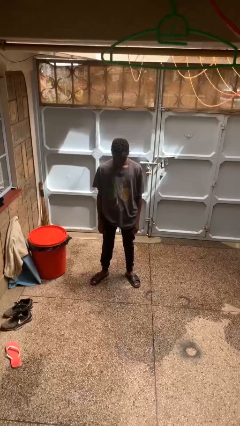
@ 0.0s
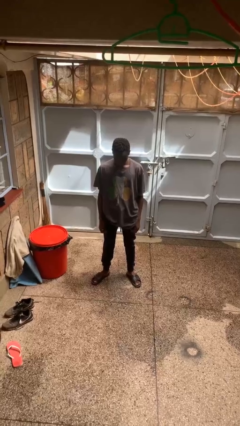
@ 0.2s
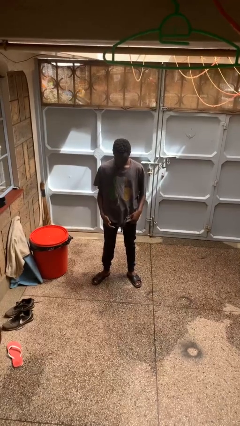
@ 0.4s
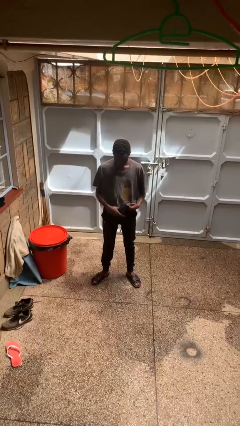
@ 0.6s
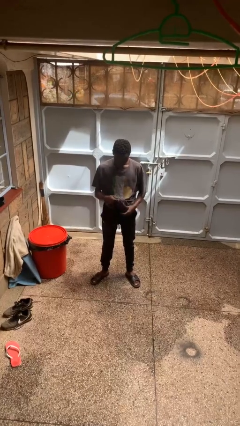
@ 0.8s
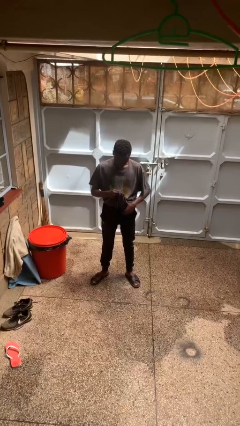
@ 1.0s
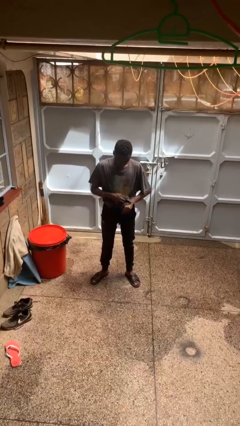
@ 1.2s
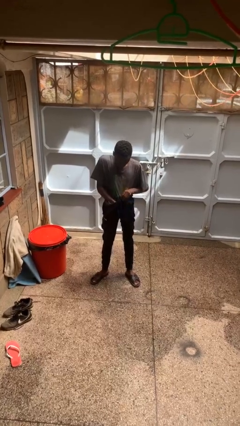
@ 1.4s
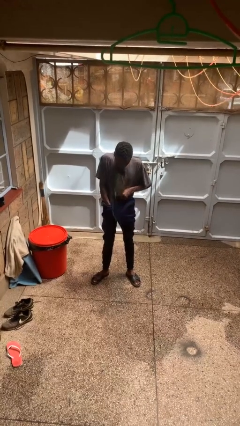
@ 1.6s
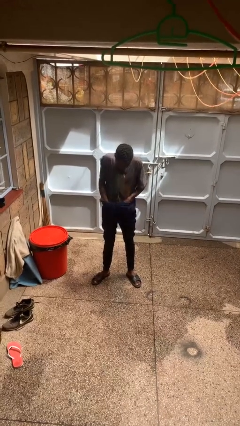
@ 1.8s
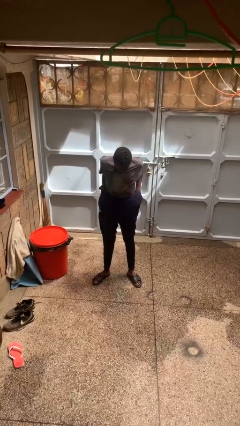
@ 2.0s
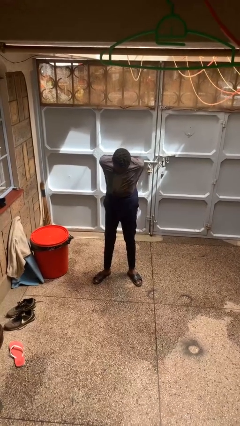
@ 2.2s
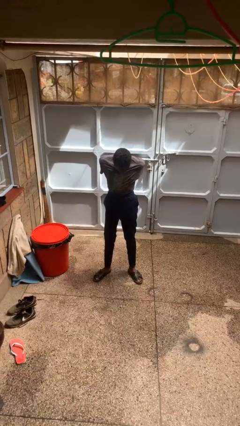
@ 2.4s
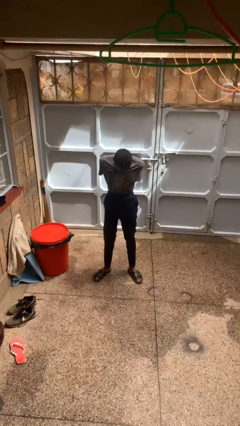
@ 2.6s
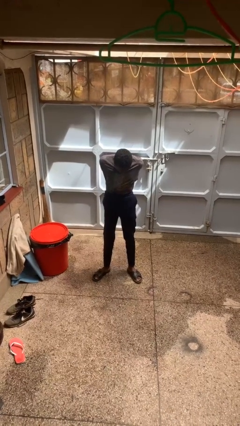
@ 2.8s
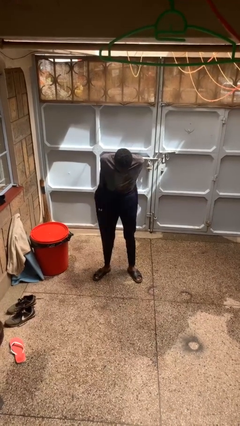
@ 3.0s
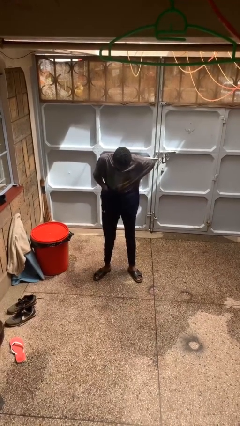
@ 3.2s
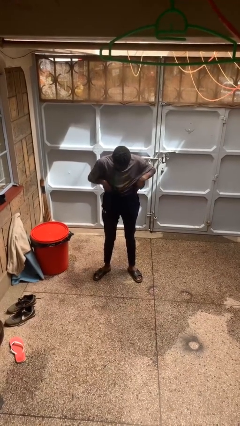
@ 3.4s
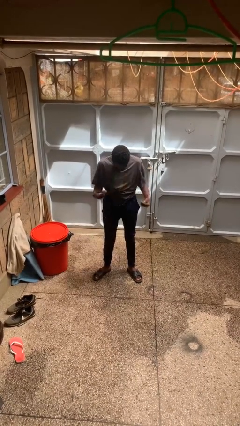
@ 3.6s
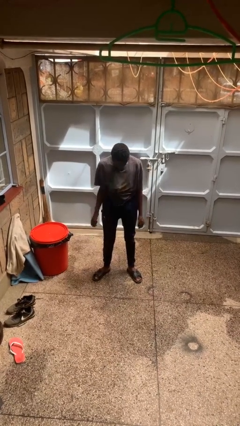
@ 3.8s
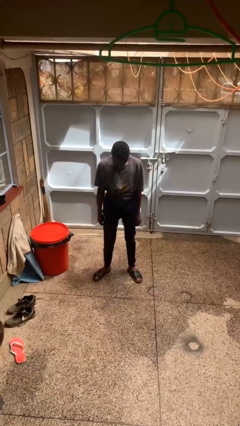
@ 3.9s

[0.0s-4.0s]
person tucks in shirt

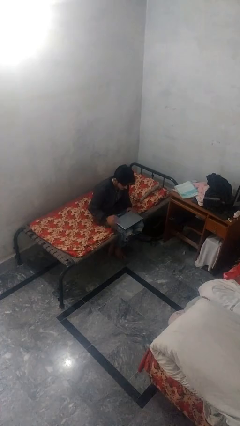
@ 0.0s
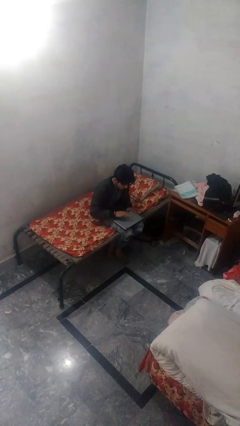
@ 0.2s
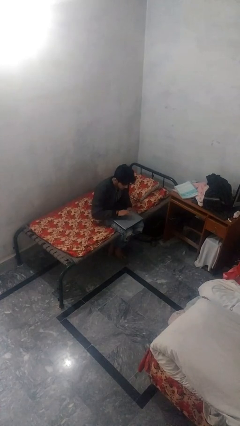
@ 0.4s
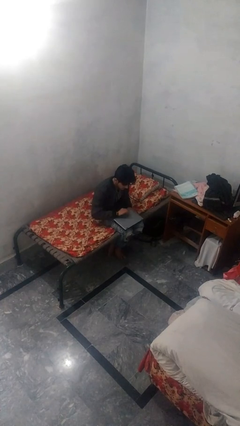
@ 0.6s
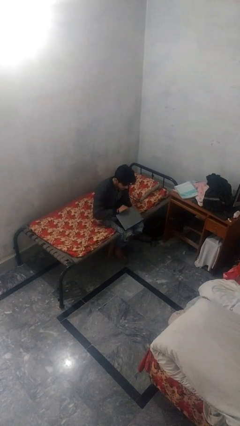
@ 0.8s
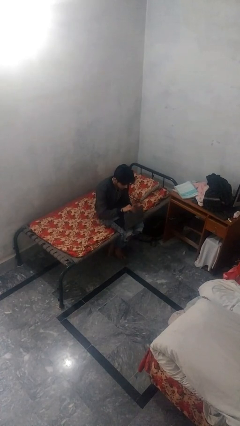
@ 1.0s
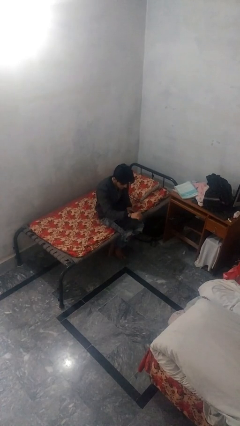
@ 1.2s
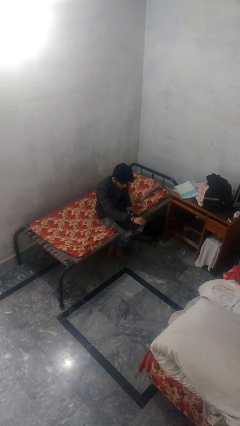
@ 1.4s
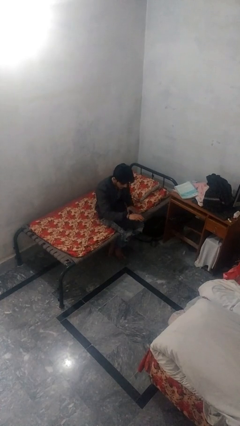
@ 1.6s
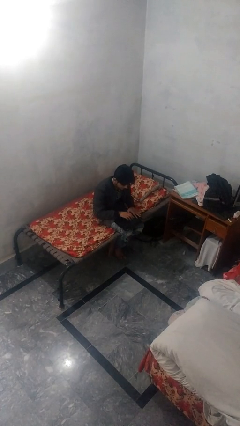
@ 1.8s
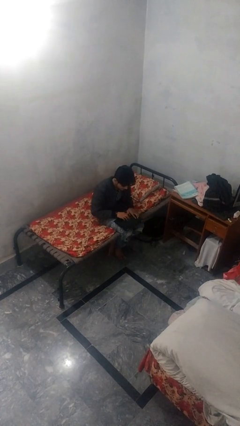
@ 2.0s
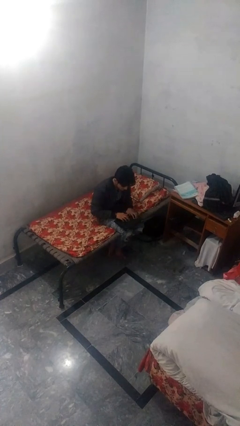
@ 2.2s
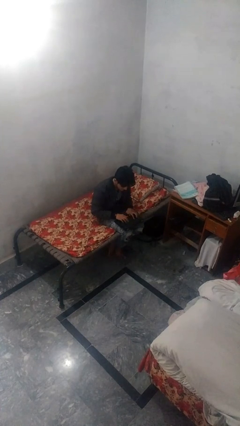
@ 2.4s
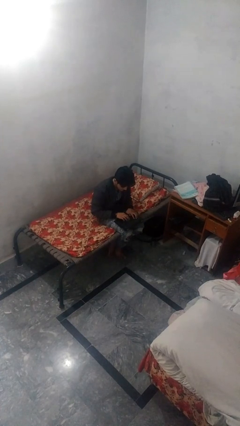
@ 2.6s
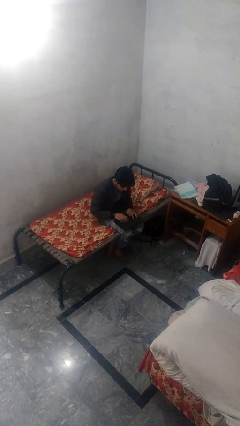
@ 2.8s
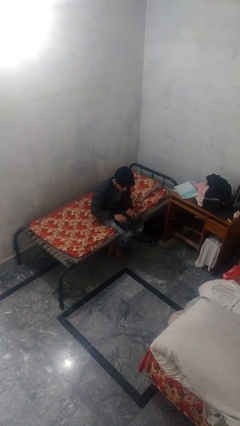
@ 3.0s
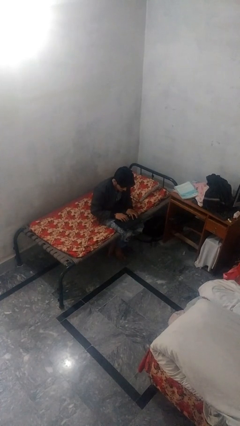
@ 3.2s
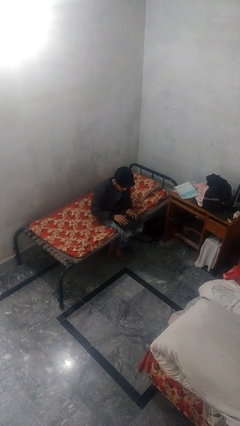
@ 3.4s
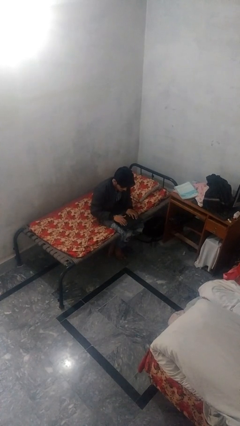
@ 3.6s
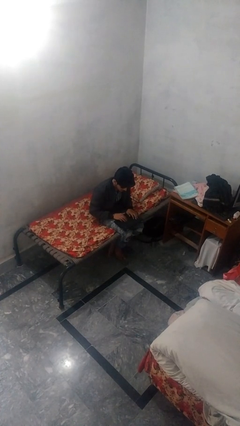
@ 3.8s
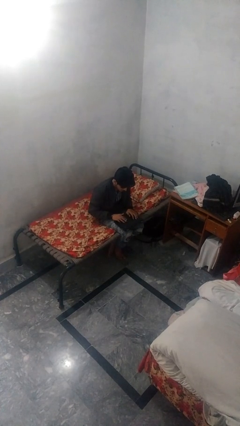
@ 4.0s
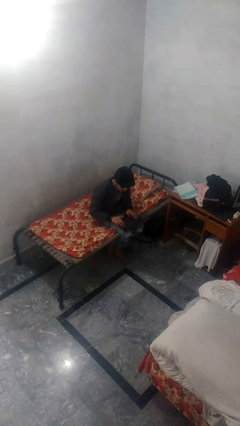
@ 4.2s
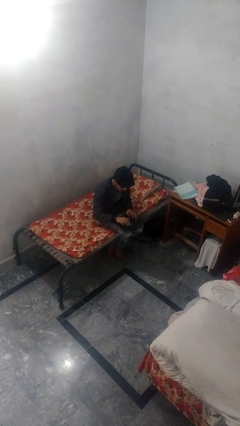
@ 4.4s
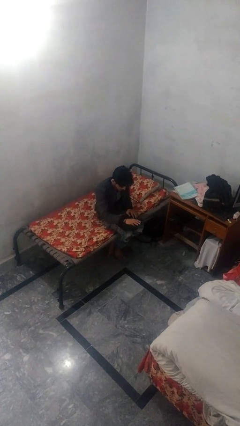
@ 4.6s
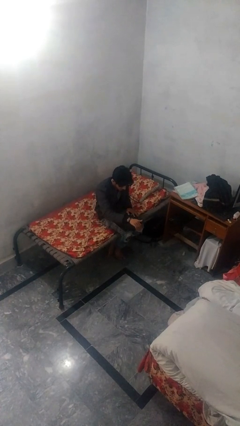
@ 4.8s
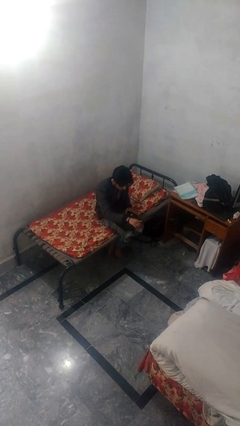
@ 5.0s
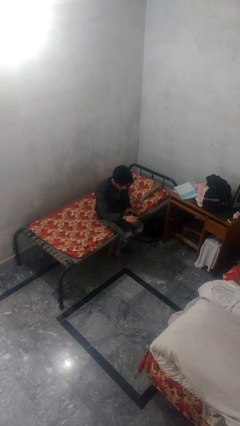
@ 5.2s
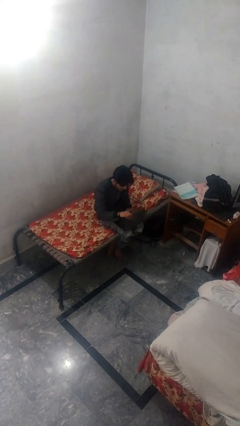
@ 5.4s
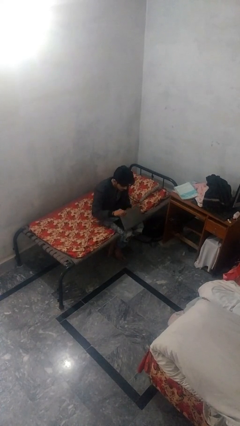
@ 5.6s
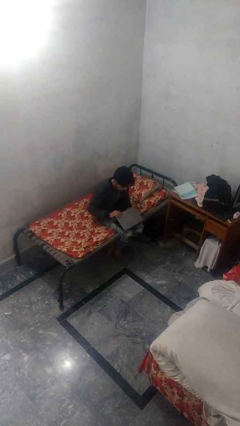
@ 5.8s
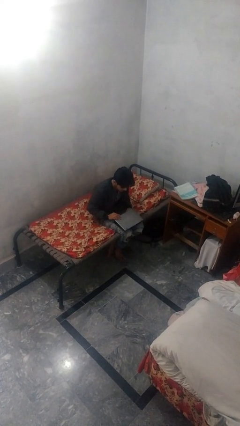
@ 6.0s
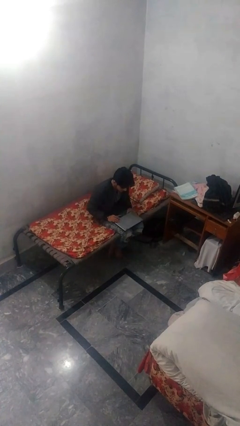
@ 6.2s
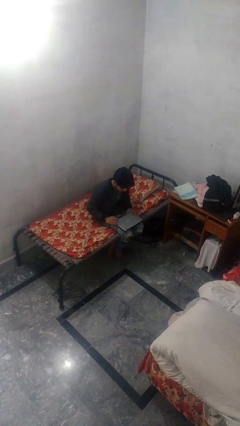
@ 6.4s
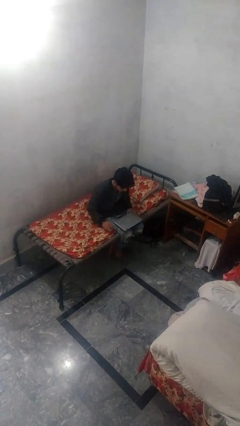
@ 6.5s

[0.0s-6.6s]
person interacts with laptop

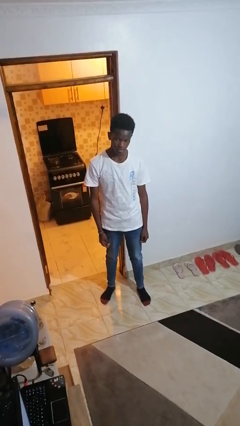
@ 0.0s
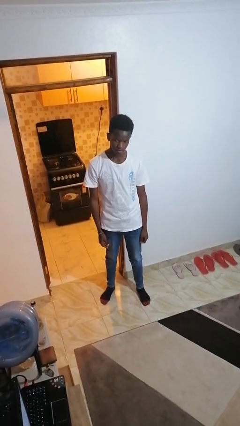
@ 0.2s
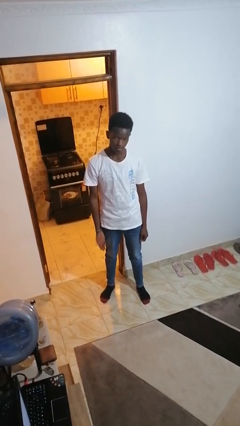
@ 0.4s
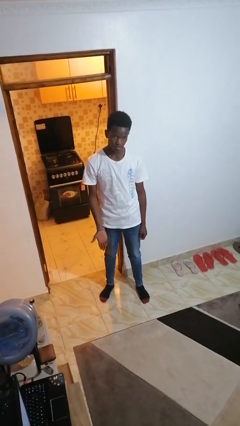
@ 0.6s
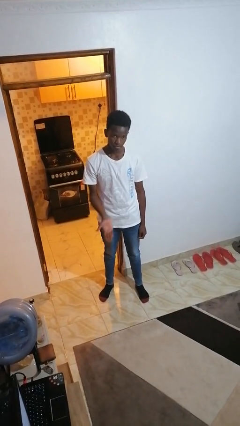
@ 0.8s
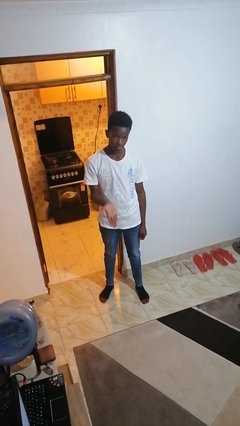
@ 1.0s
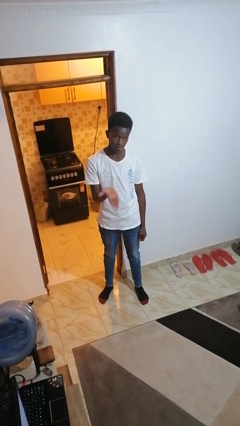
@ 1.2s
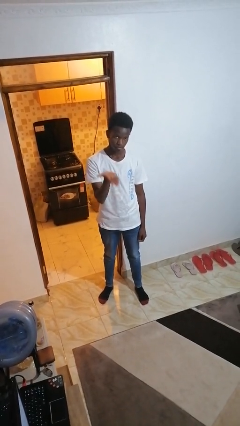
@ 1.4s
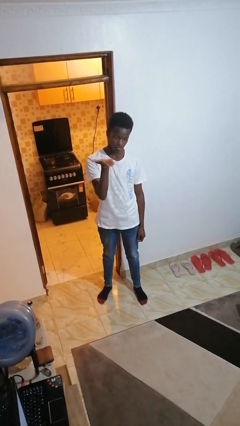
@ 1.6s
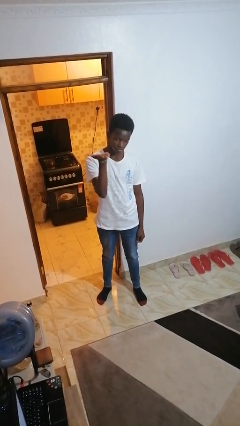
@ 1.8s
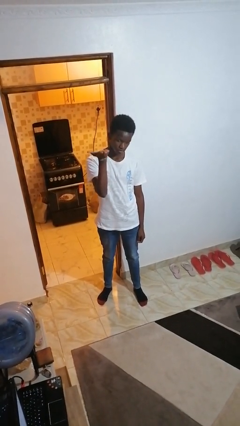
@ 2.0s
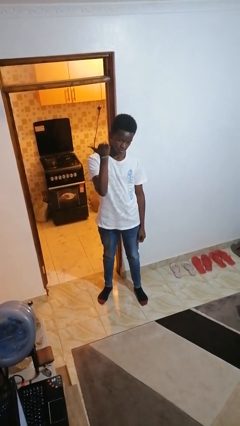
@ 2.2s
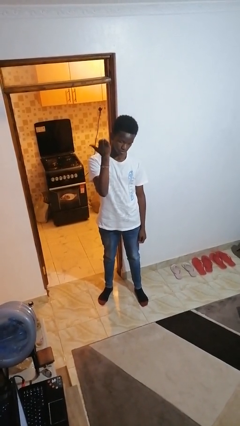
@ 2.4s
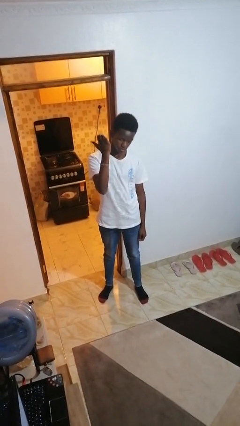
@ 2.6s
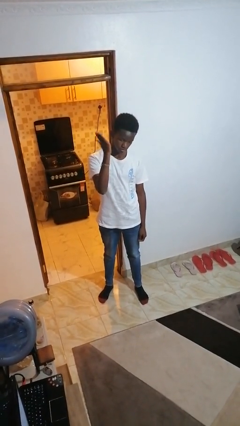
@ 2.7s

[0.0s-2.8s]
person gestures swipe up

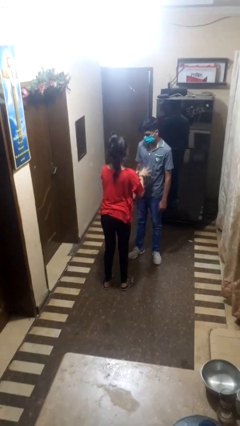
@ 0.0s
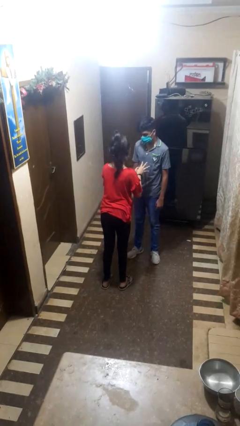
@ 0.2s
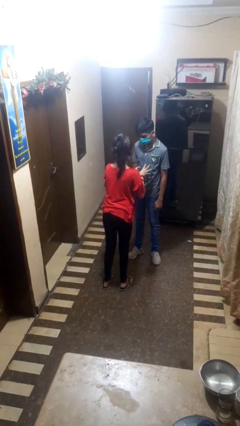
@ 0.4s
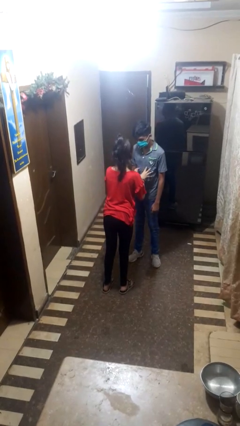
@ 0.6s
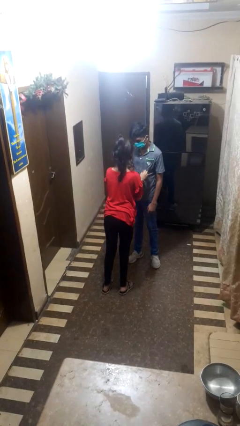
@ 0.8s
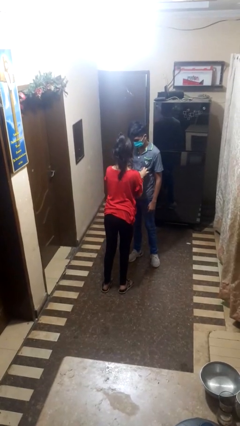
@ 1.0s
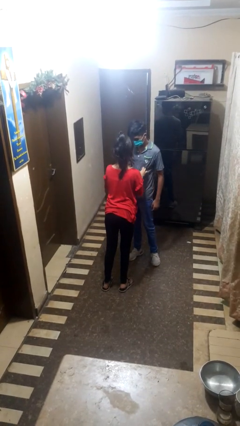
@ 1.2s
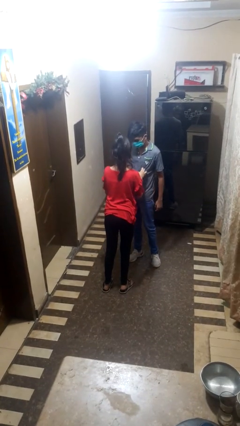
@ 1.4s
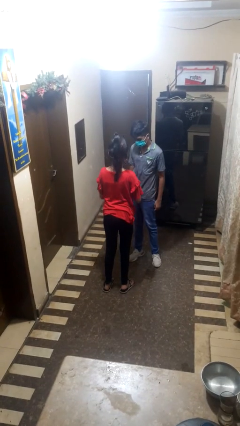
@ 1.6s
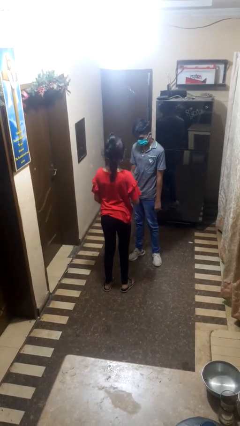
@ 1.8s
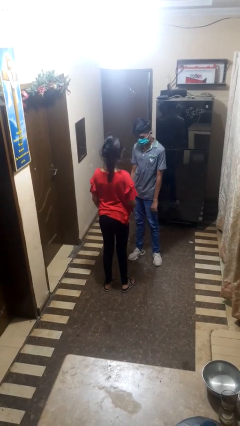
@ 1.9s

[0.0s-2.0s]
person tickles person

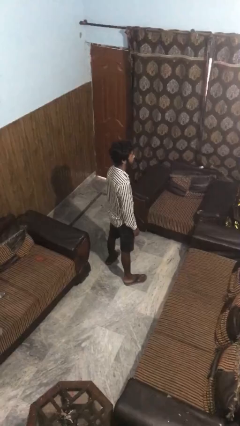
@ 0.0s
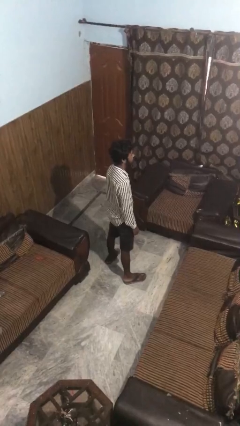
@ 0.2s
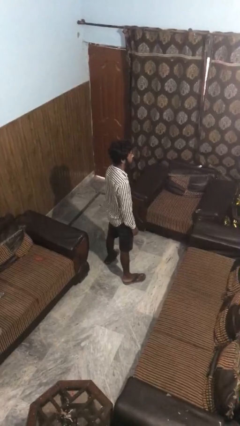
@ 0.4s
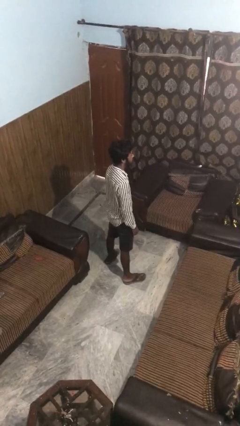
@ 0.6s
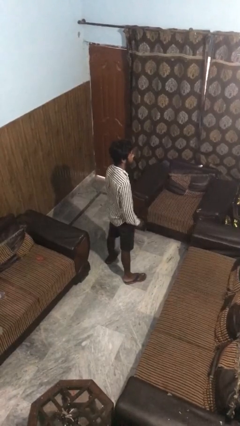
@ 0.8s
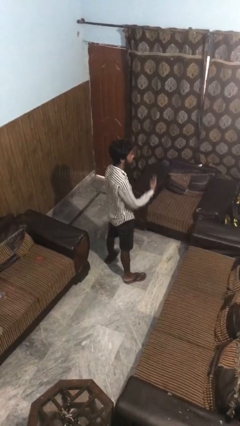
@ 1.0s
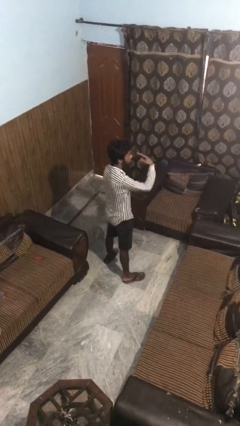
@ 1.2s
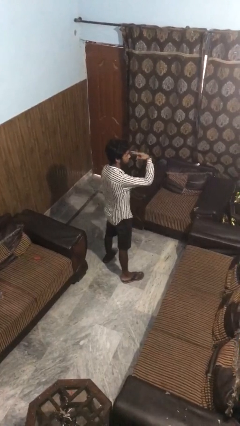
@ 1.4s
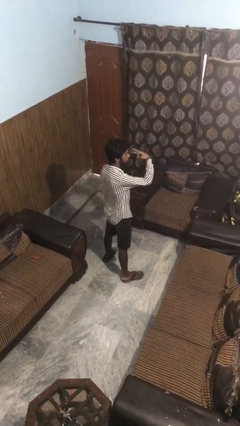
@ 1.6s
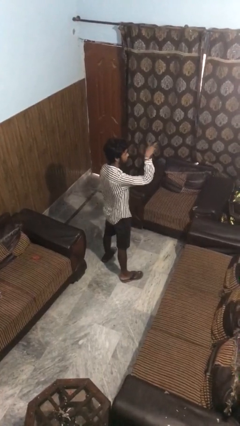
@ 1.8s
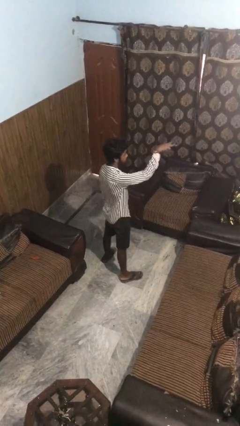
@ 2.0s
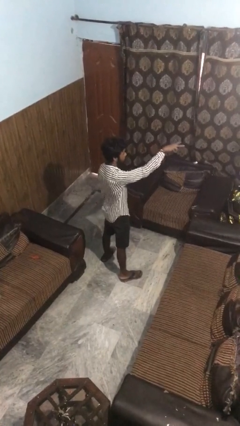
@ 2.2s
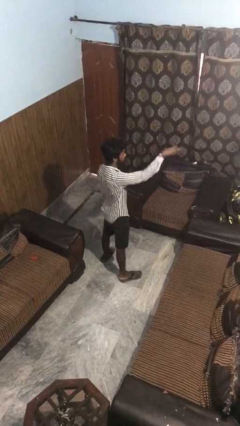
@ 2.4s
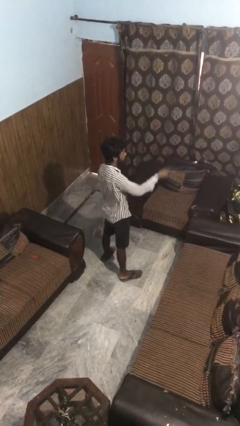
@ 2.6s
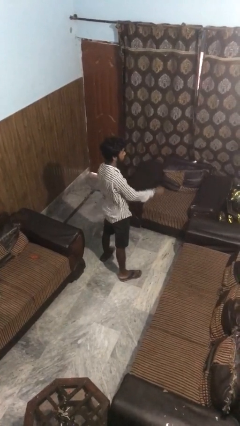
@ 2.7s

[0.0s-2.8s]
person gestures watch closely
